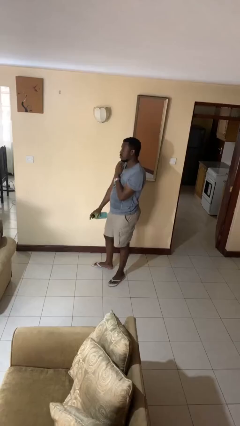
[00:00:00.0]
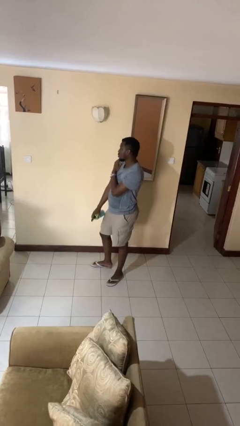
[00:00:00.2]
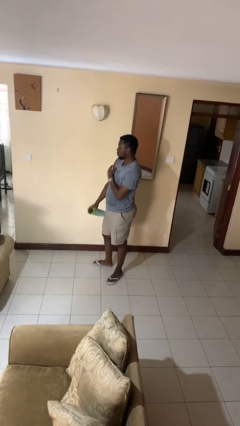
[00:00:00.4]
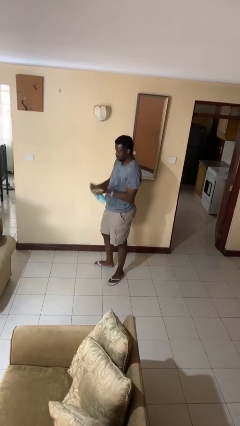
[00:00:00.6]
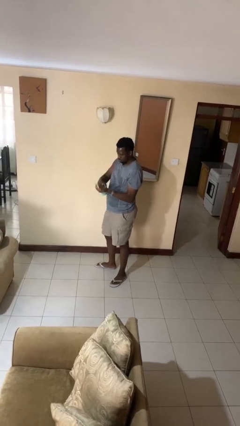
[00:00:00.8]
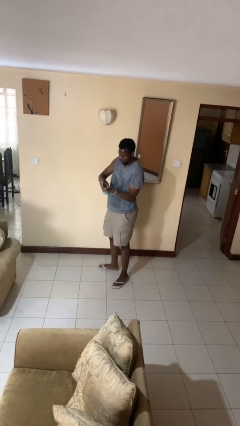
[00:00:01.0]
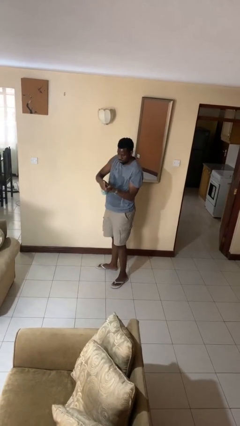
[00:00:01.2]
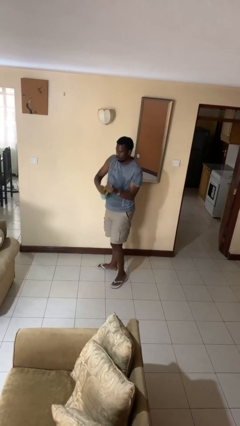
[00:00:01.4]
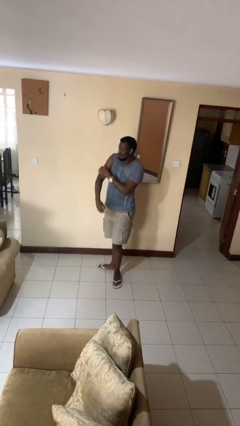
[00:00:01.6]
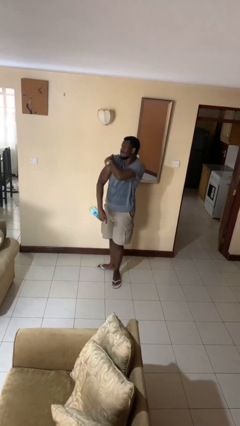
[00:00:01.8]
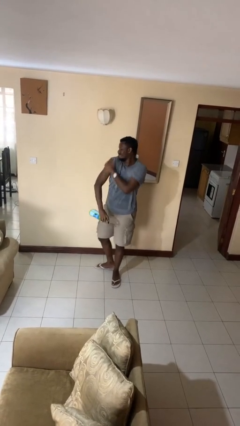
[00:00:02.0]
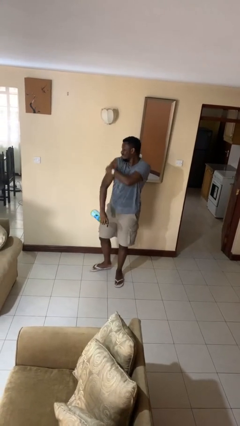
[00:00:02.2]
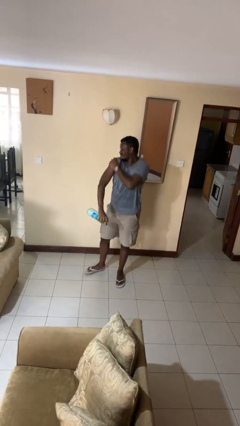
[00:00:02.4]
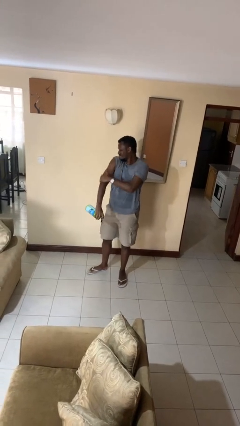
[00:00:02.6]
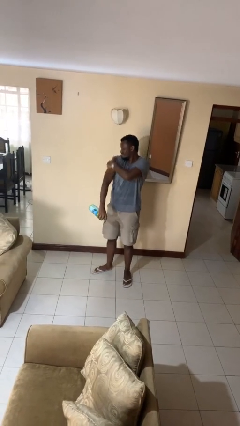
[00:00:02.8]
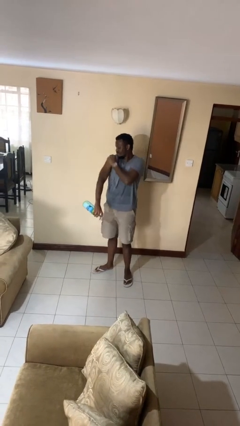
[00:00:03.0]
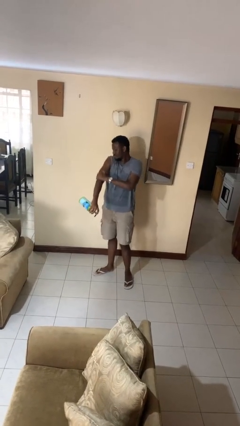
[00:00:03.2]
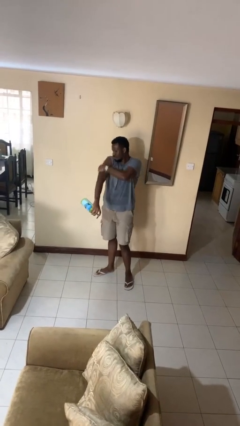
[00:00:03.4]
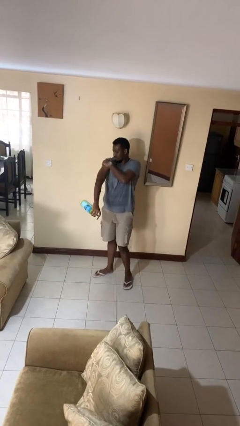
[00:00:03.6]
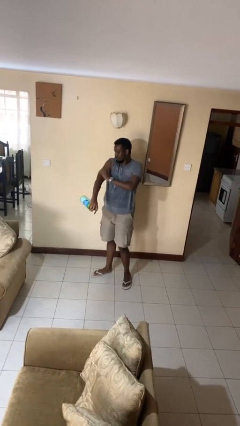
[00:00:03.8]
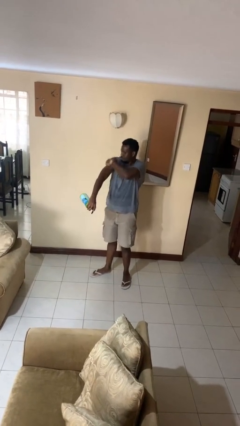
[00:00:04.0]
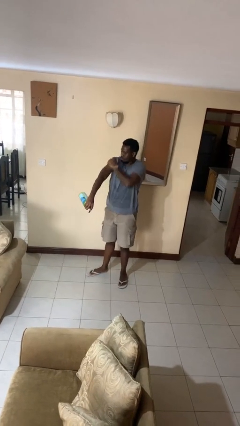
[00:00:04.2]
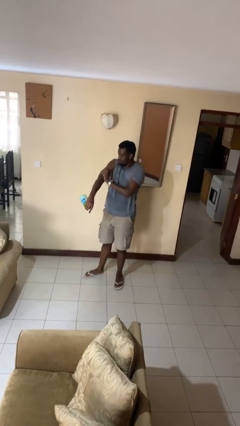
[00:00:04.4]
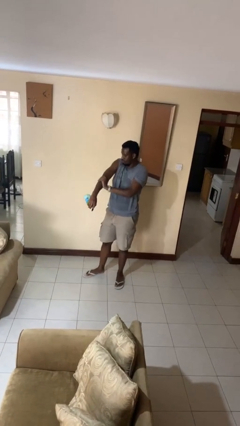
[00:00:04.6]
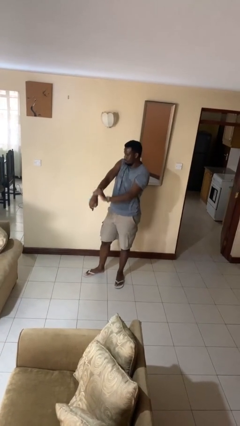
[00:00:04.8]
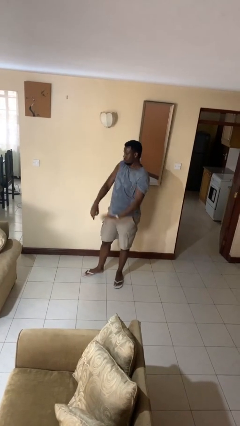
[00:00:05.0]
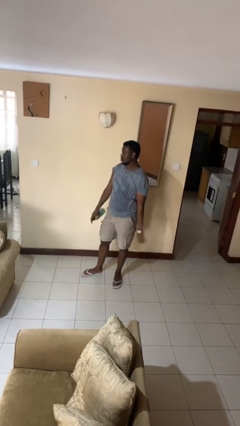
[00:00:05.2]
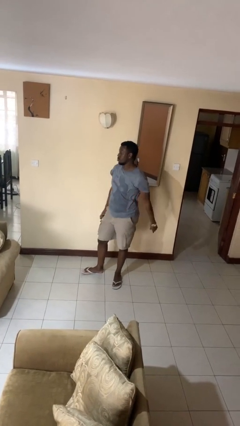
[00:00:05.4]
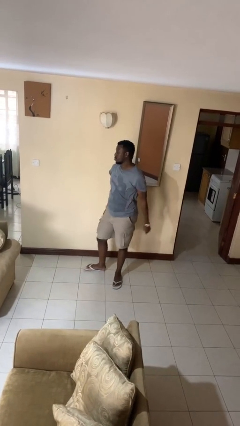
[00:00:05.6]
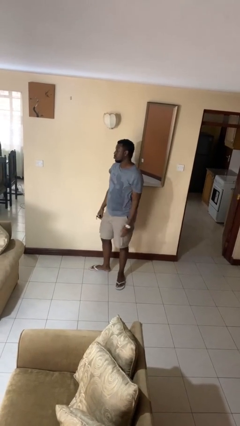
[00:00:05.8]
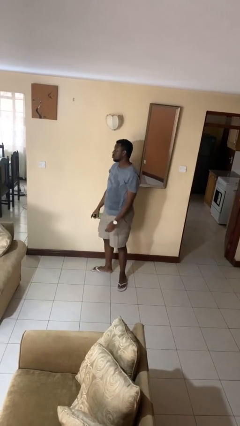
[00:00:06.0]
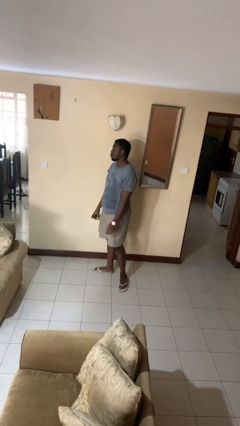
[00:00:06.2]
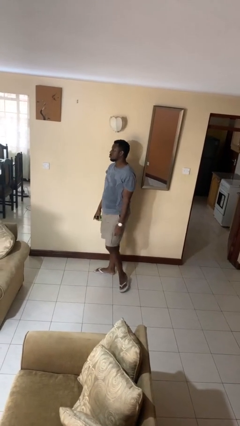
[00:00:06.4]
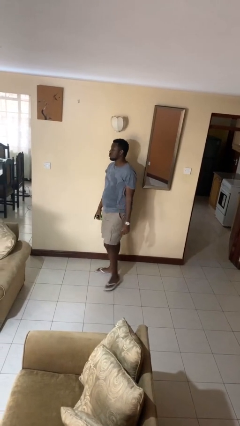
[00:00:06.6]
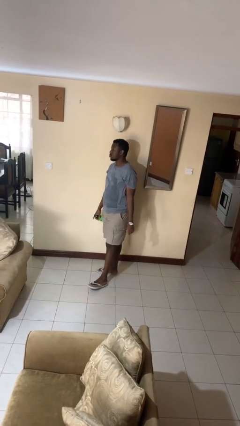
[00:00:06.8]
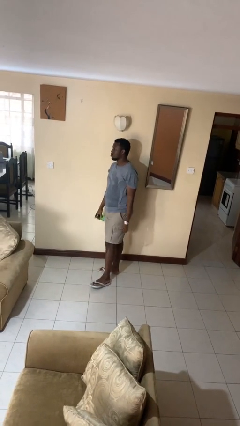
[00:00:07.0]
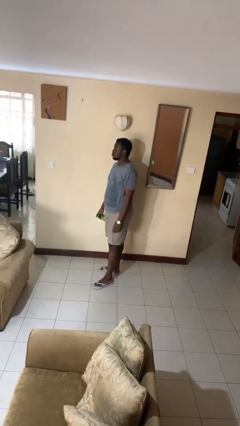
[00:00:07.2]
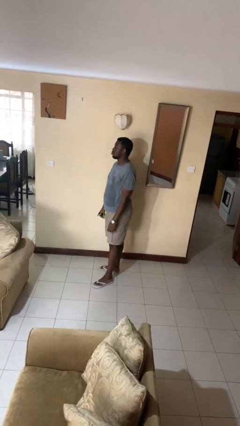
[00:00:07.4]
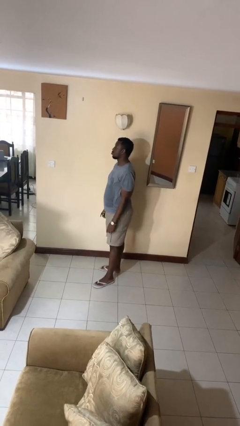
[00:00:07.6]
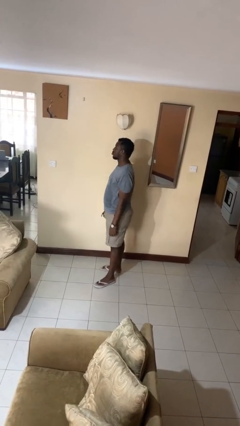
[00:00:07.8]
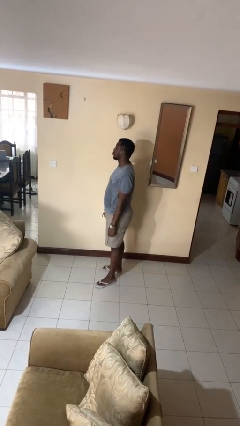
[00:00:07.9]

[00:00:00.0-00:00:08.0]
person applies sunscreen

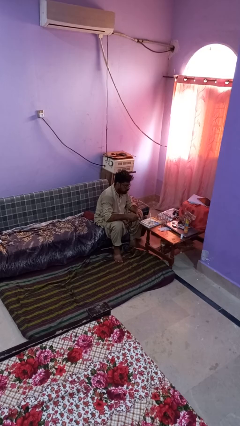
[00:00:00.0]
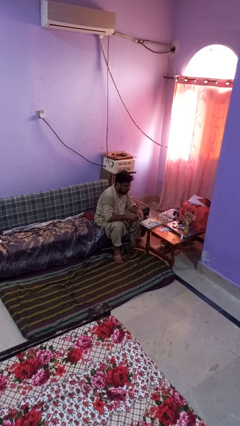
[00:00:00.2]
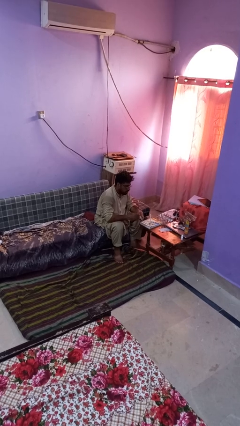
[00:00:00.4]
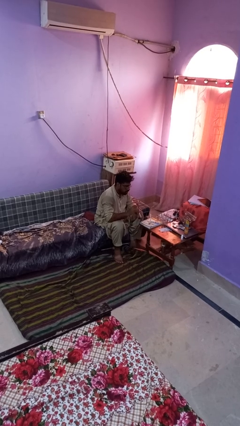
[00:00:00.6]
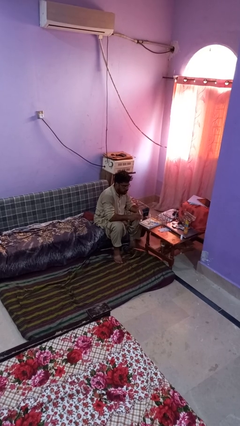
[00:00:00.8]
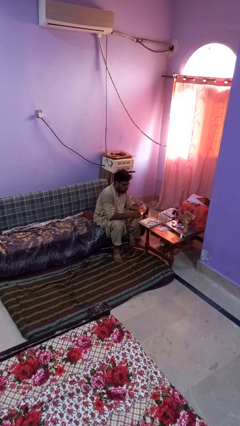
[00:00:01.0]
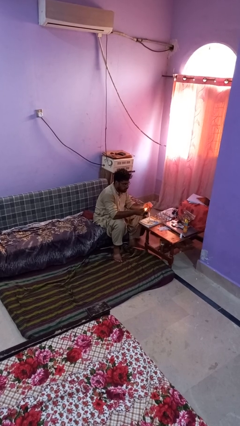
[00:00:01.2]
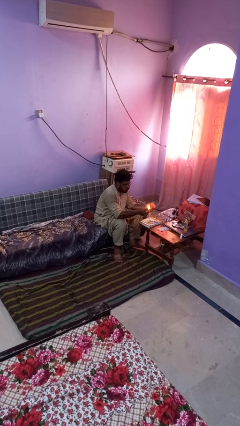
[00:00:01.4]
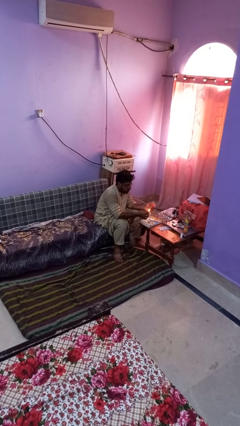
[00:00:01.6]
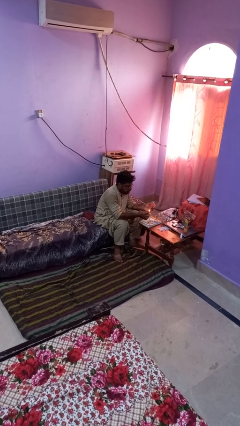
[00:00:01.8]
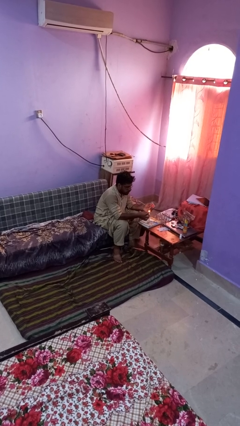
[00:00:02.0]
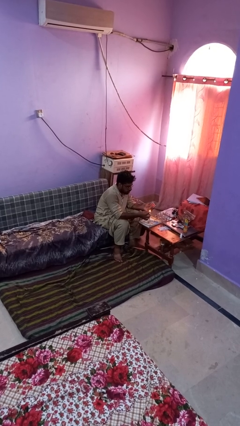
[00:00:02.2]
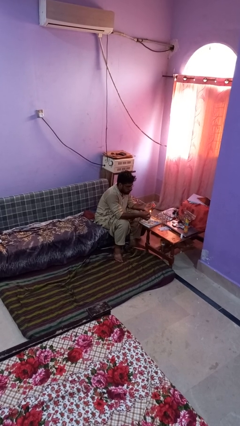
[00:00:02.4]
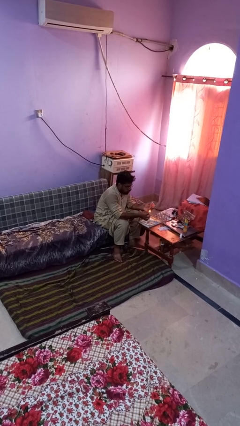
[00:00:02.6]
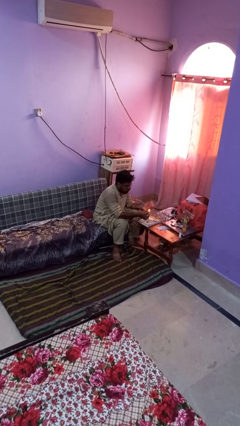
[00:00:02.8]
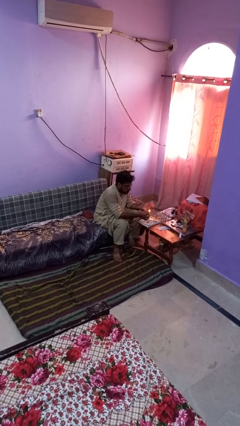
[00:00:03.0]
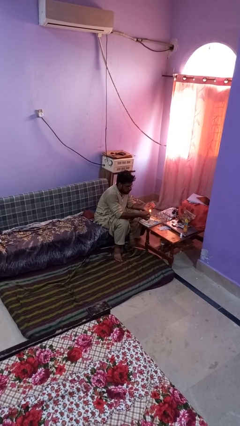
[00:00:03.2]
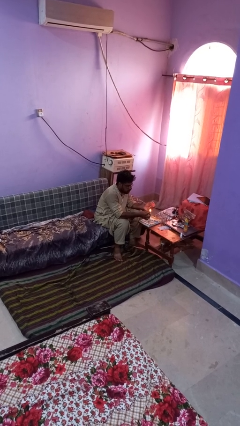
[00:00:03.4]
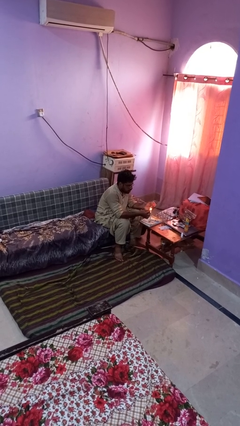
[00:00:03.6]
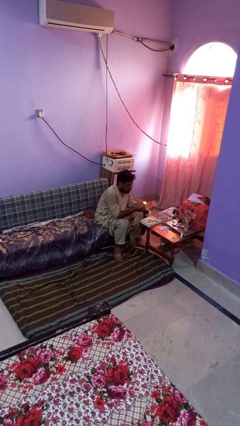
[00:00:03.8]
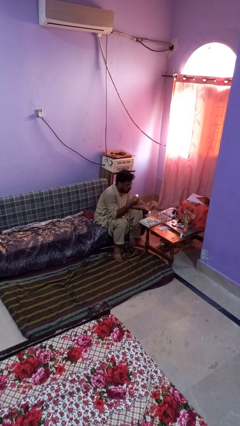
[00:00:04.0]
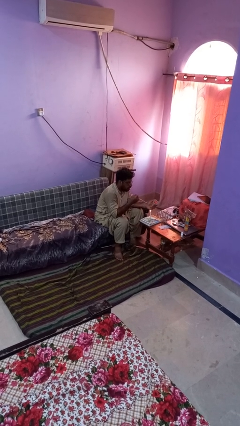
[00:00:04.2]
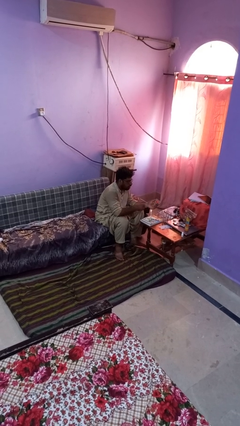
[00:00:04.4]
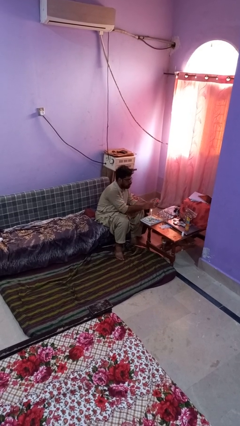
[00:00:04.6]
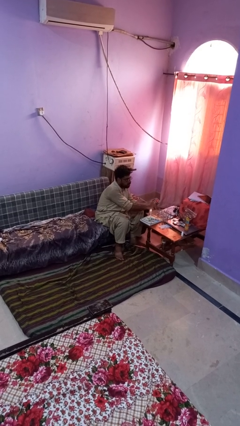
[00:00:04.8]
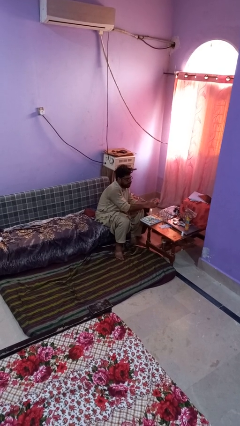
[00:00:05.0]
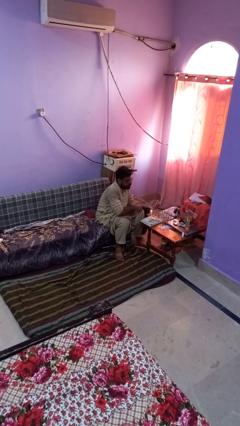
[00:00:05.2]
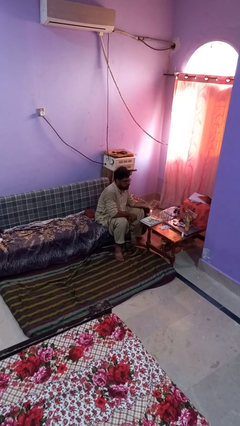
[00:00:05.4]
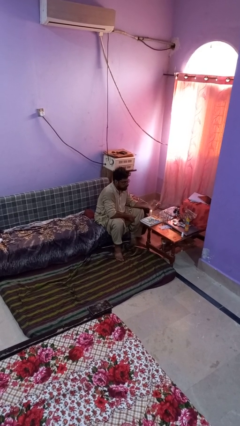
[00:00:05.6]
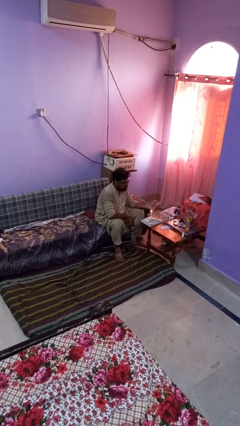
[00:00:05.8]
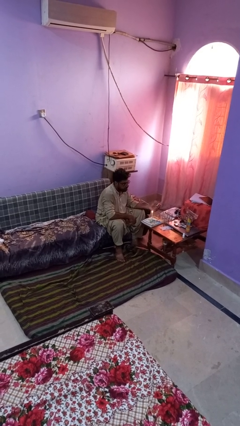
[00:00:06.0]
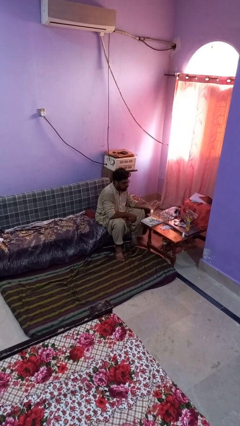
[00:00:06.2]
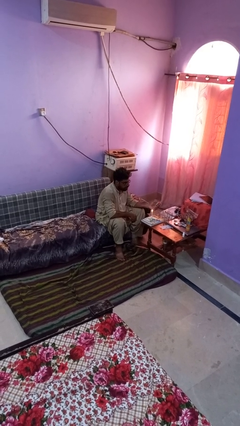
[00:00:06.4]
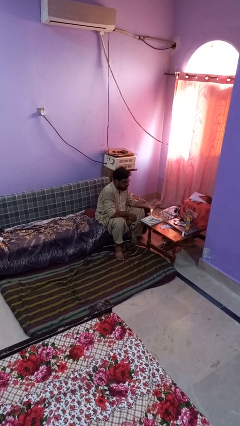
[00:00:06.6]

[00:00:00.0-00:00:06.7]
person lights candle

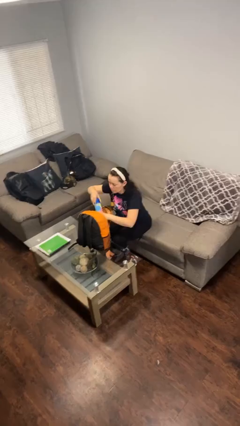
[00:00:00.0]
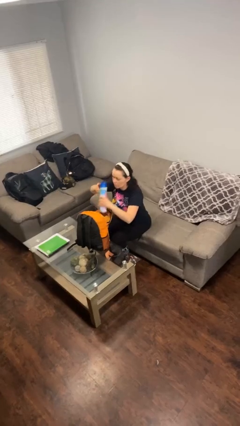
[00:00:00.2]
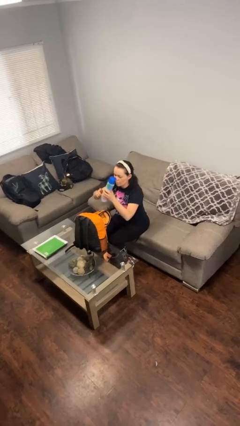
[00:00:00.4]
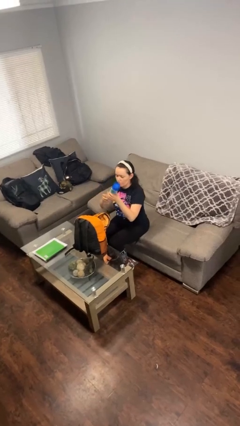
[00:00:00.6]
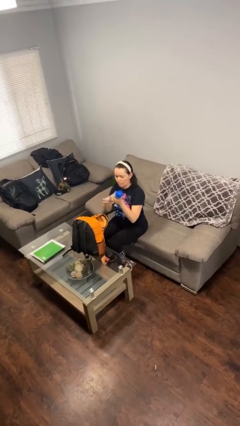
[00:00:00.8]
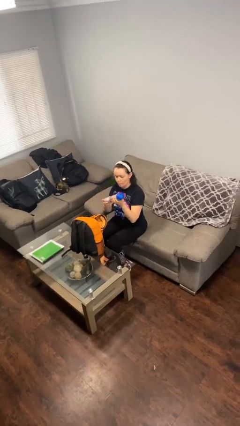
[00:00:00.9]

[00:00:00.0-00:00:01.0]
person takes object from backpack

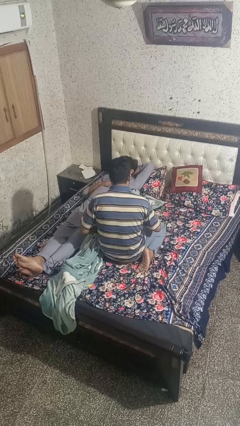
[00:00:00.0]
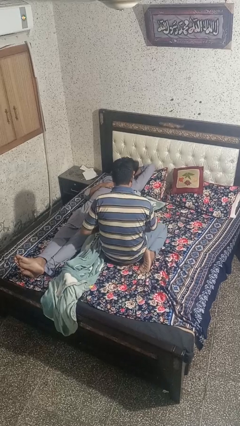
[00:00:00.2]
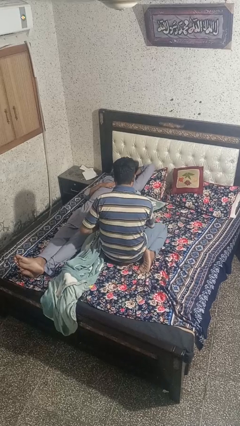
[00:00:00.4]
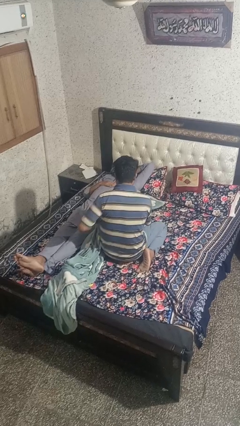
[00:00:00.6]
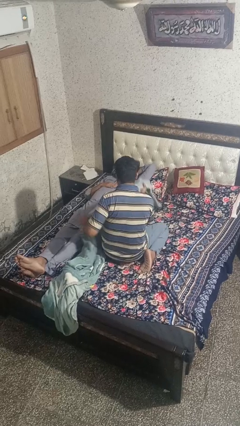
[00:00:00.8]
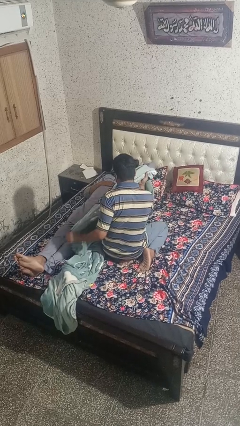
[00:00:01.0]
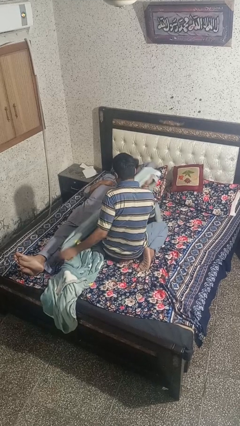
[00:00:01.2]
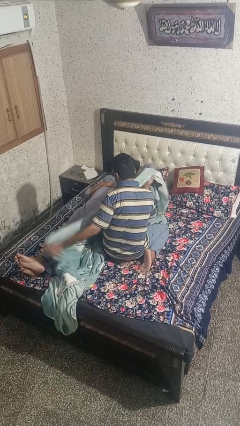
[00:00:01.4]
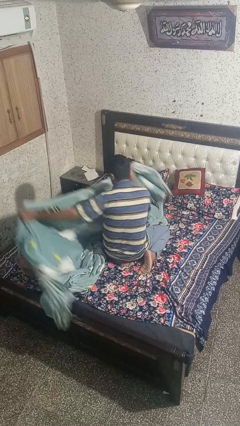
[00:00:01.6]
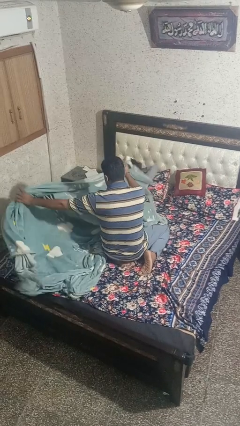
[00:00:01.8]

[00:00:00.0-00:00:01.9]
person covers friend with blanket

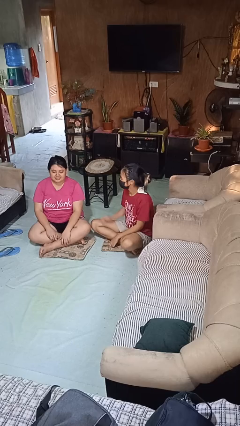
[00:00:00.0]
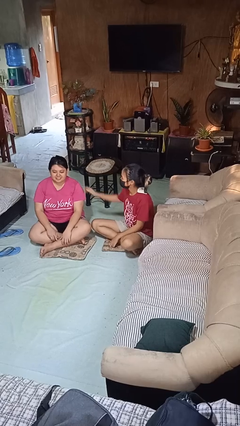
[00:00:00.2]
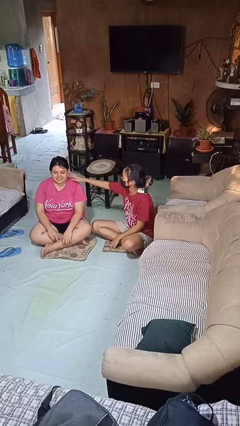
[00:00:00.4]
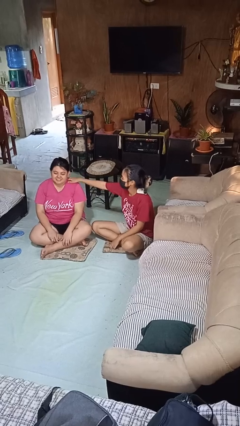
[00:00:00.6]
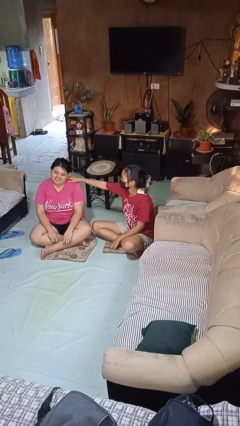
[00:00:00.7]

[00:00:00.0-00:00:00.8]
person tickles person
